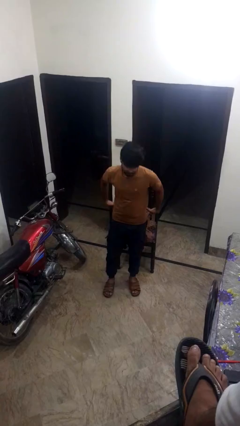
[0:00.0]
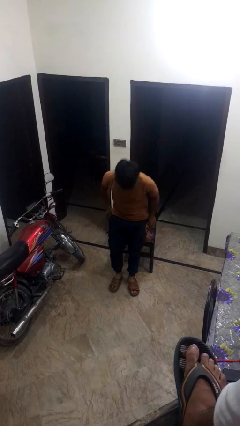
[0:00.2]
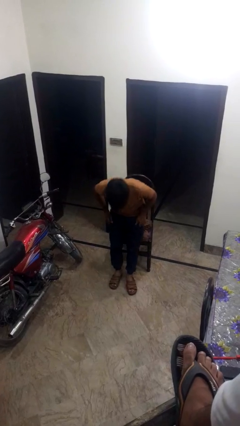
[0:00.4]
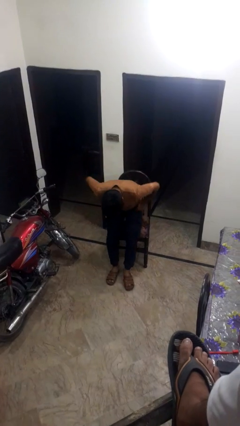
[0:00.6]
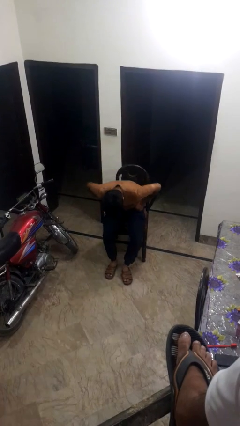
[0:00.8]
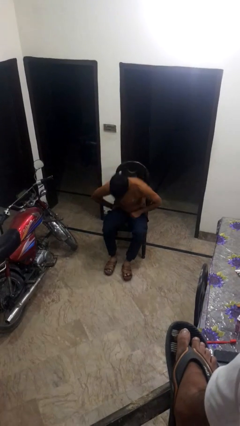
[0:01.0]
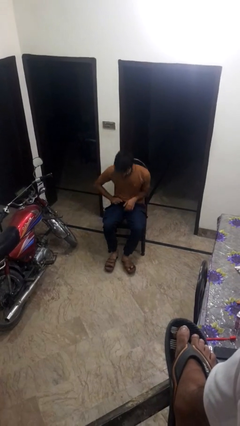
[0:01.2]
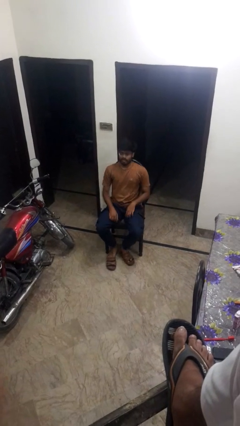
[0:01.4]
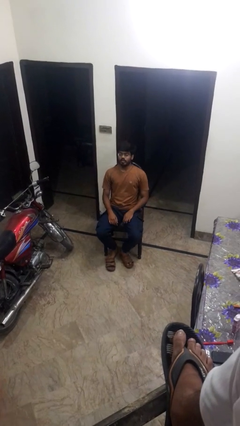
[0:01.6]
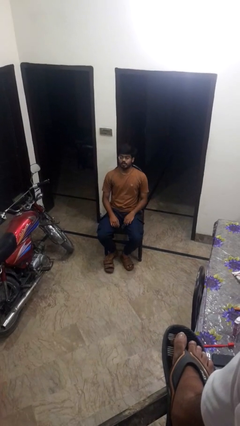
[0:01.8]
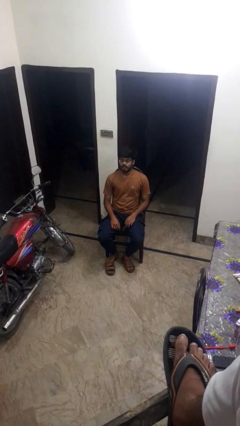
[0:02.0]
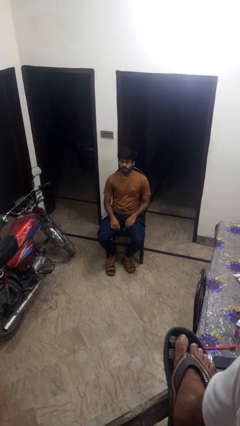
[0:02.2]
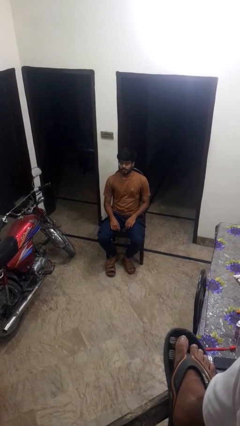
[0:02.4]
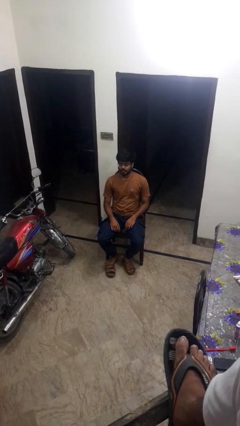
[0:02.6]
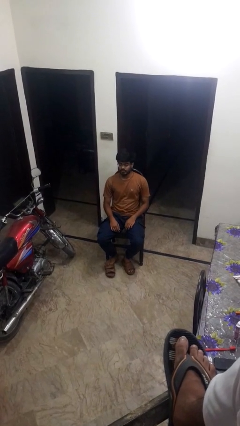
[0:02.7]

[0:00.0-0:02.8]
person sits down

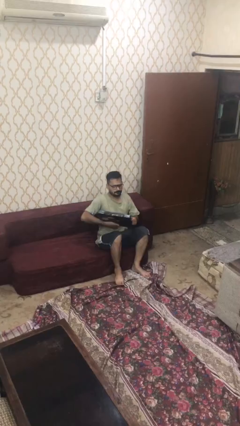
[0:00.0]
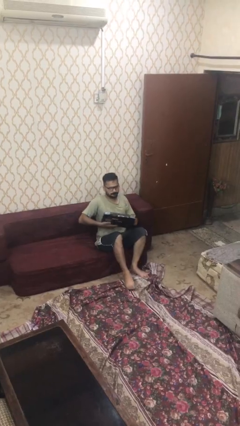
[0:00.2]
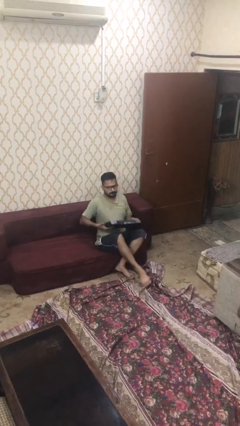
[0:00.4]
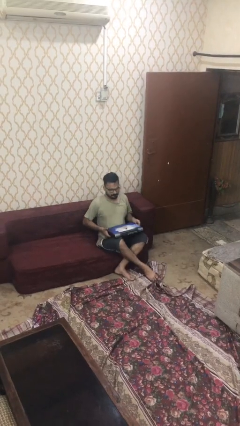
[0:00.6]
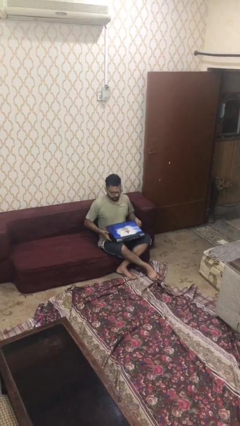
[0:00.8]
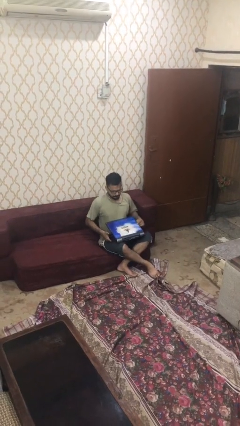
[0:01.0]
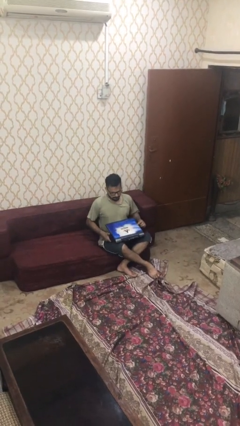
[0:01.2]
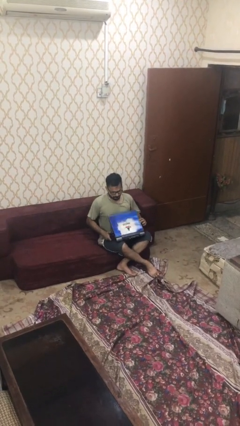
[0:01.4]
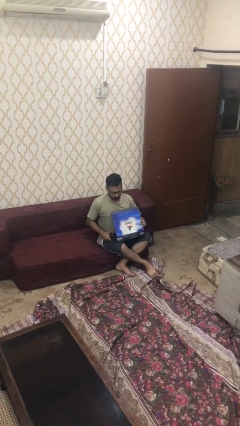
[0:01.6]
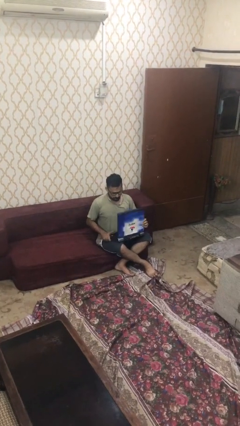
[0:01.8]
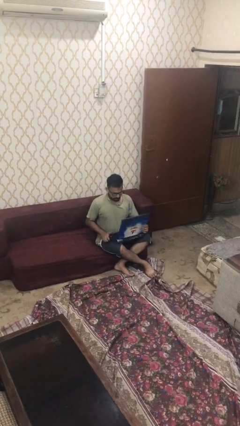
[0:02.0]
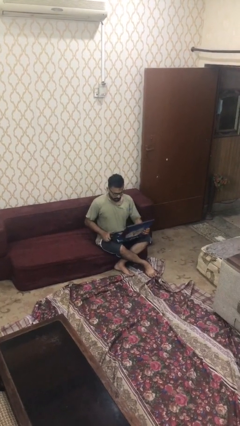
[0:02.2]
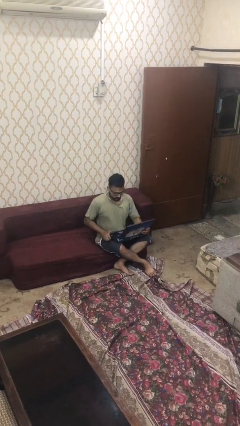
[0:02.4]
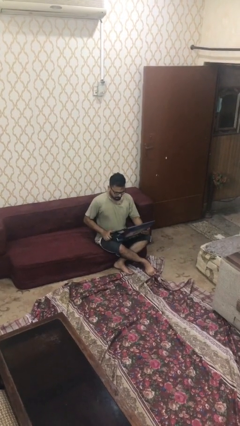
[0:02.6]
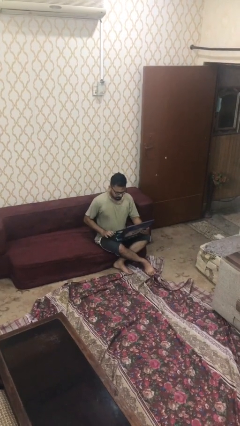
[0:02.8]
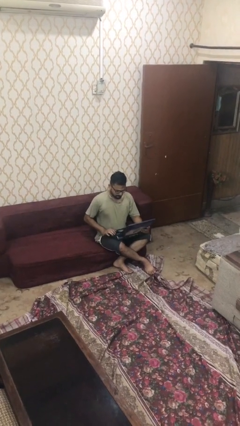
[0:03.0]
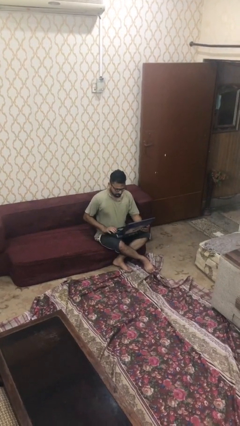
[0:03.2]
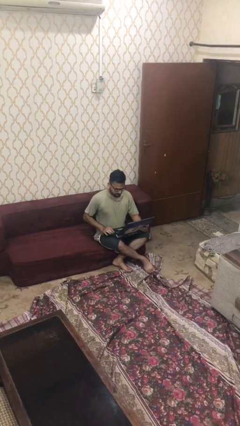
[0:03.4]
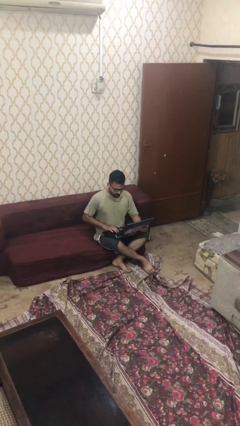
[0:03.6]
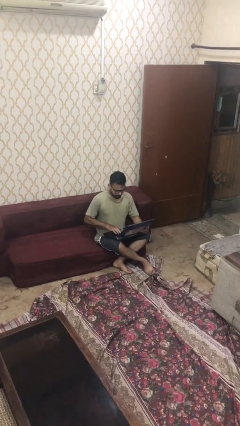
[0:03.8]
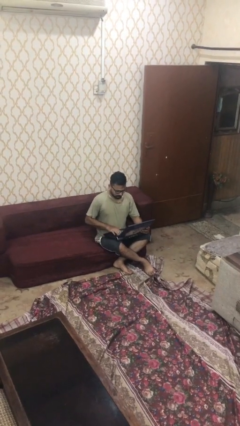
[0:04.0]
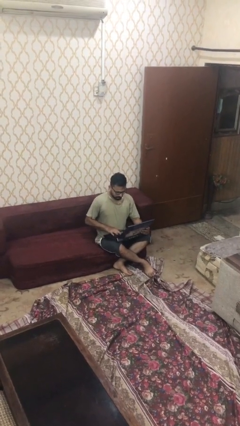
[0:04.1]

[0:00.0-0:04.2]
person interacts with laptop

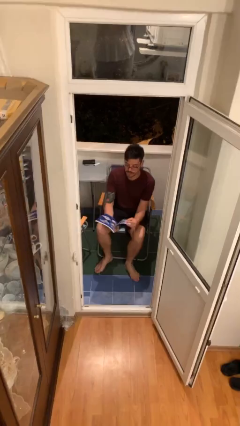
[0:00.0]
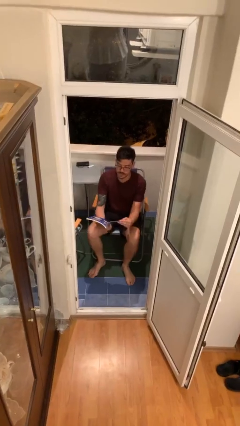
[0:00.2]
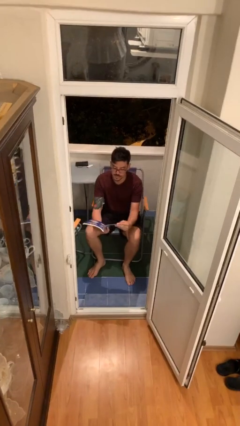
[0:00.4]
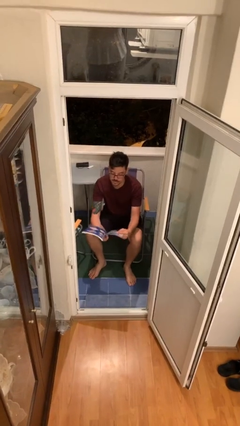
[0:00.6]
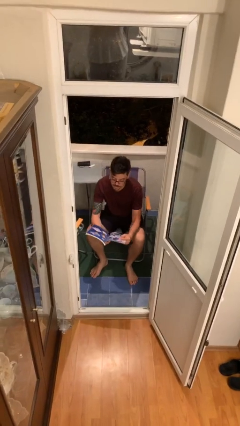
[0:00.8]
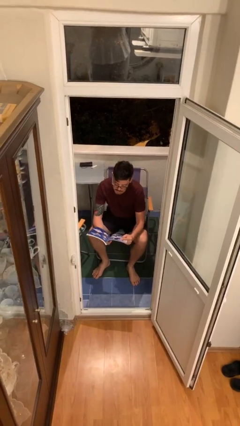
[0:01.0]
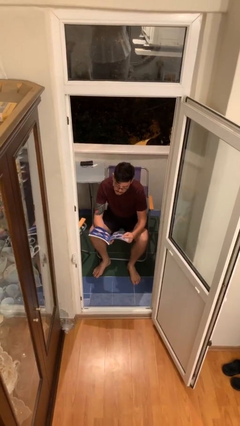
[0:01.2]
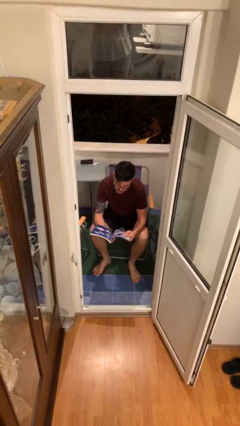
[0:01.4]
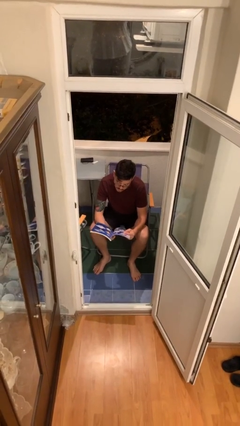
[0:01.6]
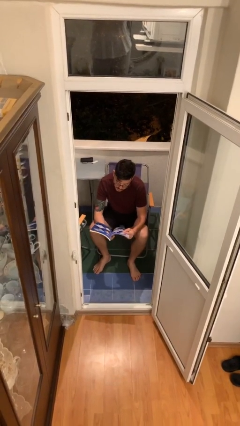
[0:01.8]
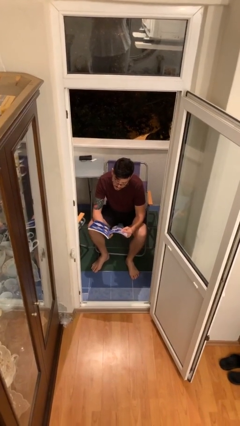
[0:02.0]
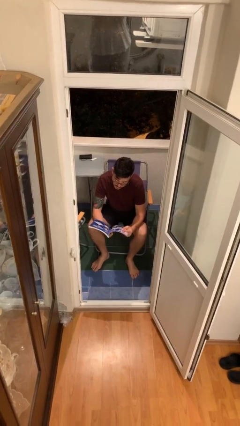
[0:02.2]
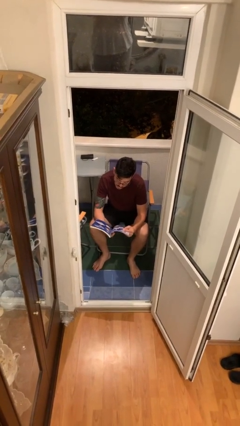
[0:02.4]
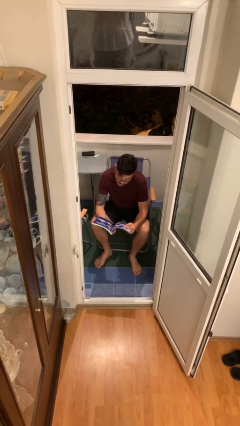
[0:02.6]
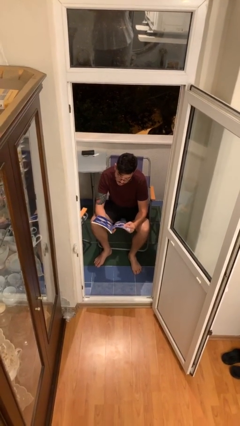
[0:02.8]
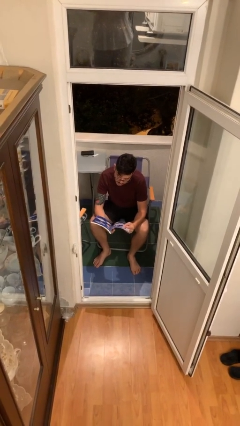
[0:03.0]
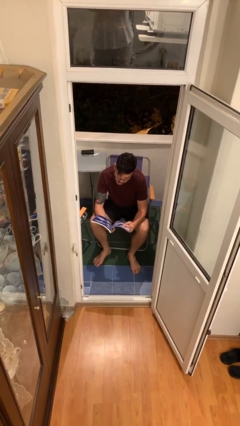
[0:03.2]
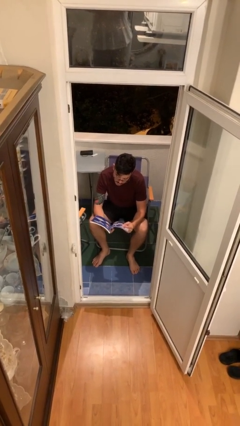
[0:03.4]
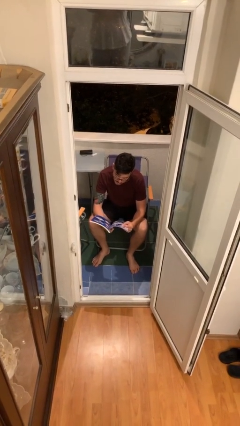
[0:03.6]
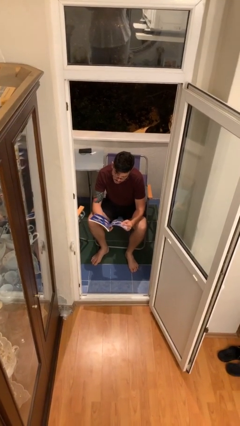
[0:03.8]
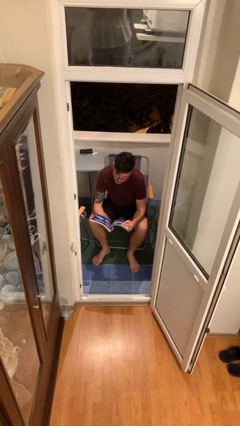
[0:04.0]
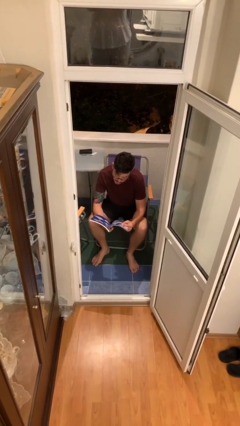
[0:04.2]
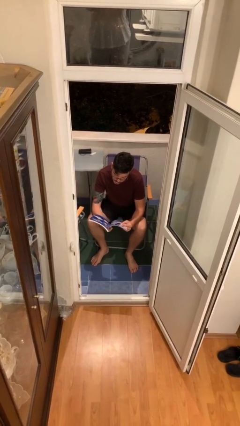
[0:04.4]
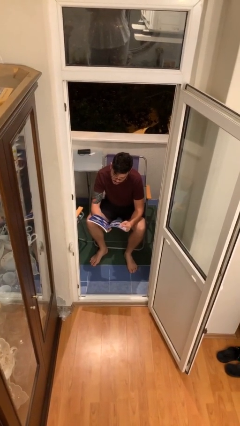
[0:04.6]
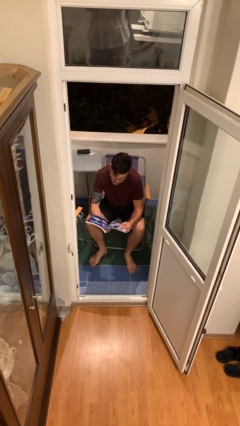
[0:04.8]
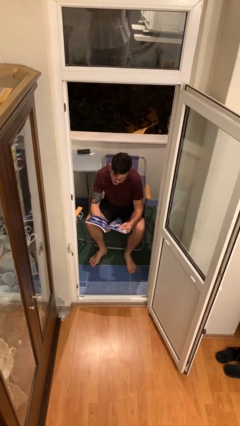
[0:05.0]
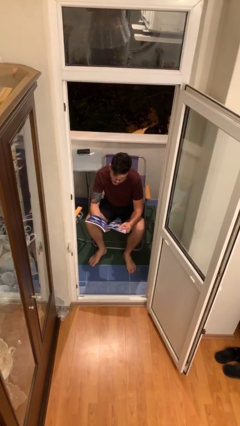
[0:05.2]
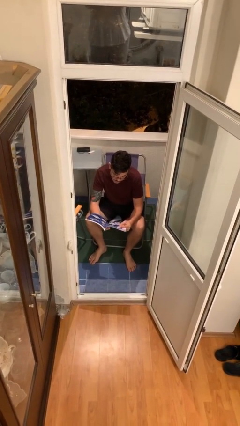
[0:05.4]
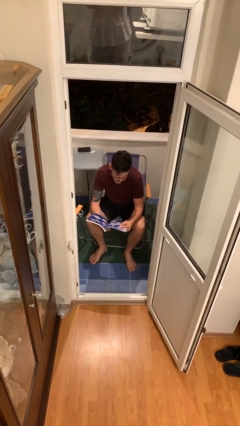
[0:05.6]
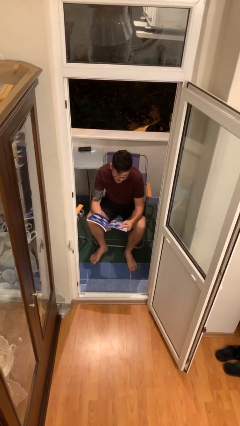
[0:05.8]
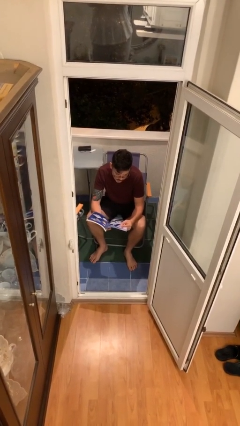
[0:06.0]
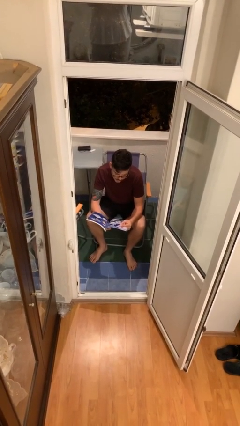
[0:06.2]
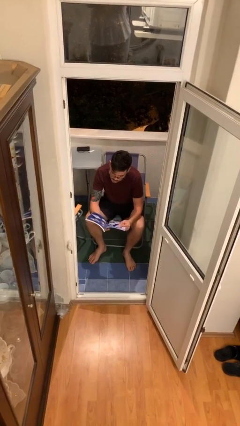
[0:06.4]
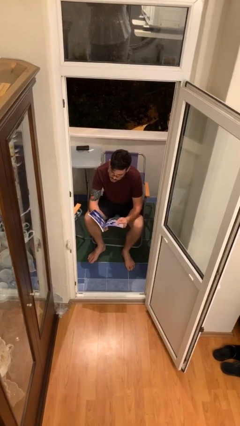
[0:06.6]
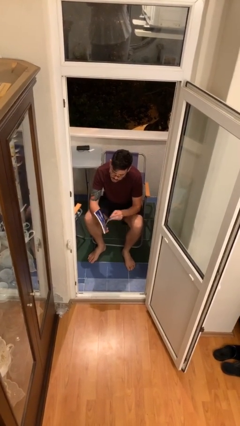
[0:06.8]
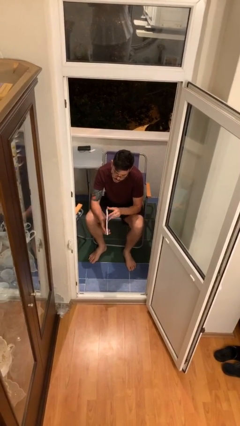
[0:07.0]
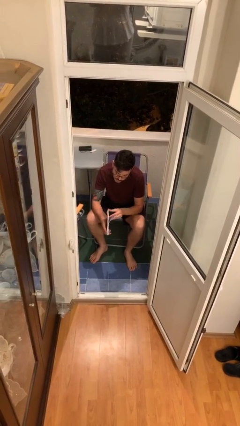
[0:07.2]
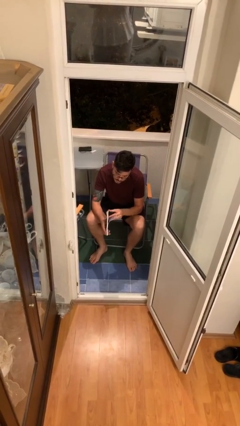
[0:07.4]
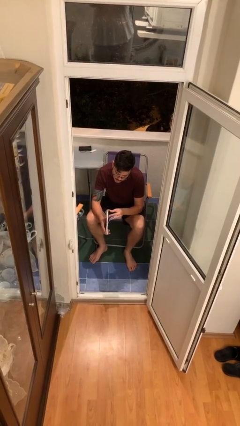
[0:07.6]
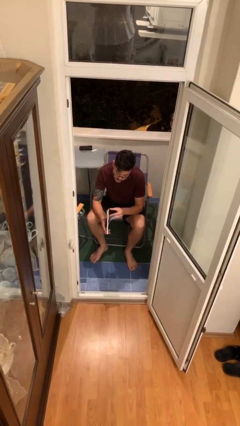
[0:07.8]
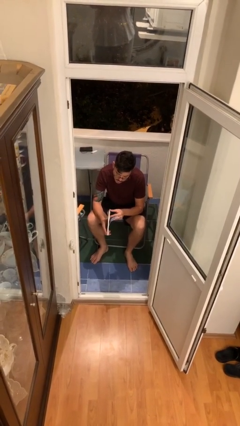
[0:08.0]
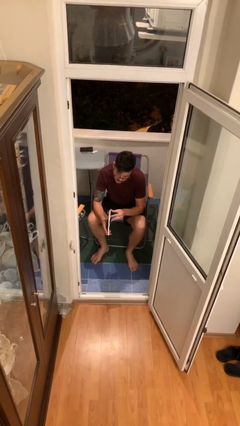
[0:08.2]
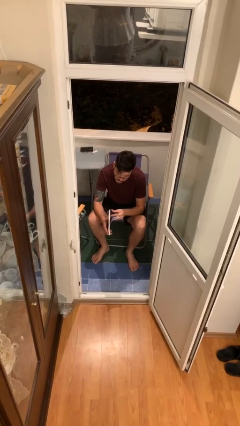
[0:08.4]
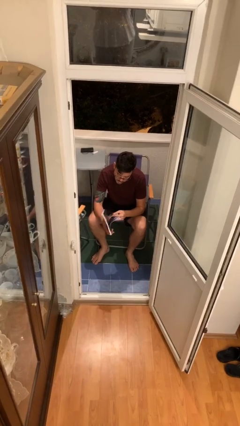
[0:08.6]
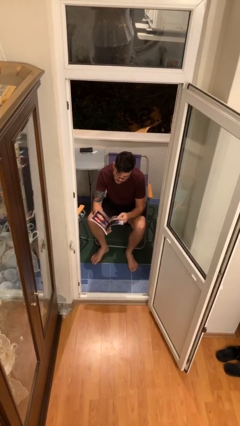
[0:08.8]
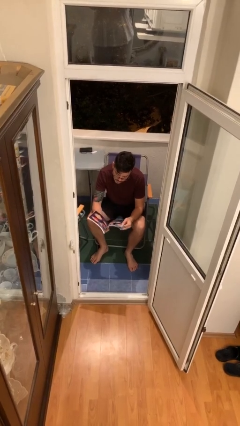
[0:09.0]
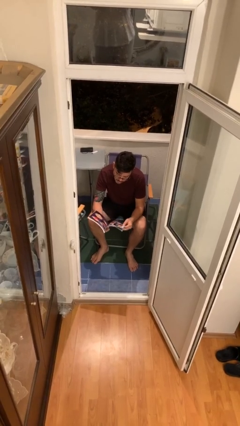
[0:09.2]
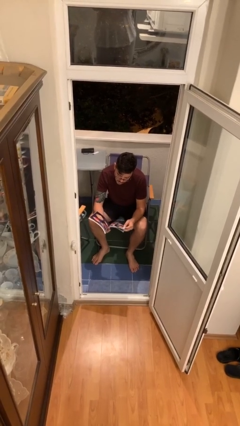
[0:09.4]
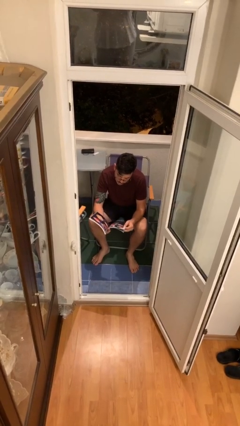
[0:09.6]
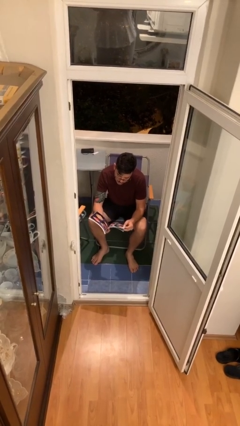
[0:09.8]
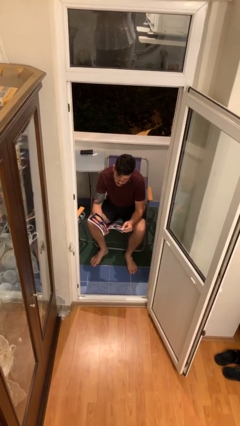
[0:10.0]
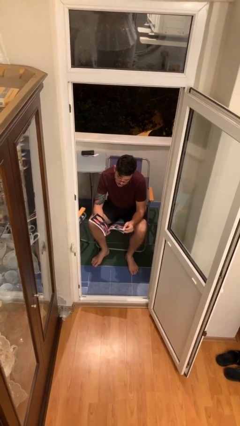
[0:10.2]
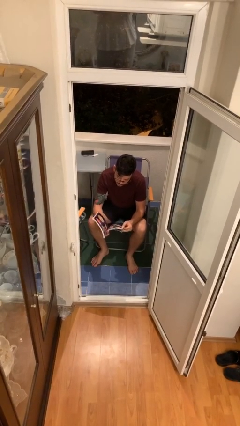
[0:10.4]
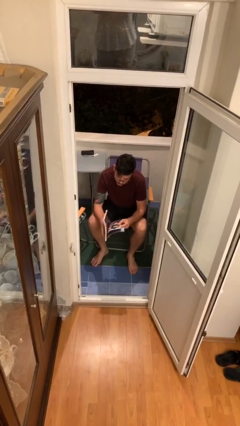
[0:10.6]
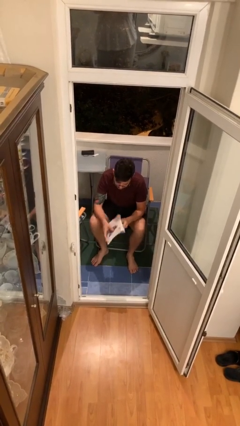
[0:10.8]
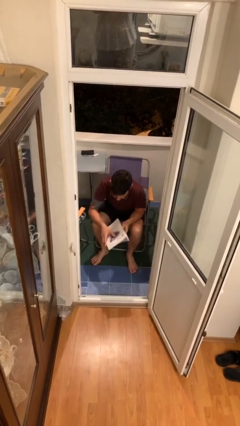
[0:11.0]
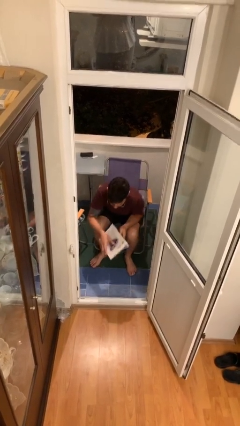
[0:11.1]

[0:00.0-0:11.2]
person reads document
